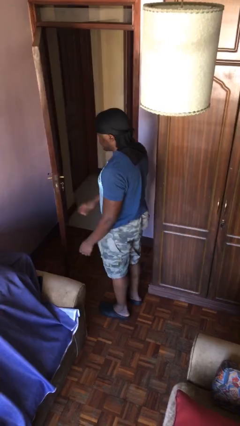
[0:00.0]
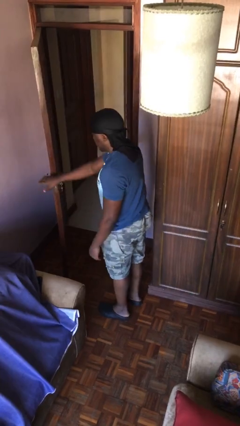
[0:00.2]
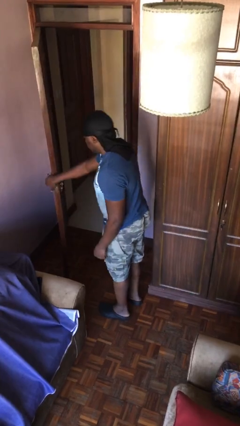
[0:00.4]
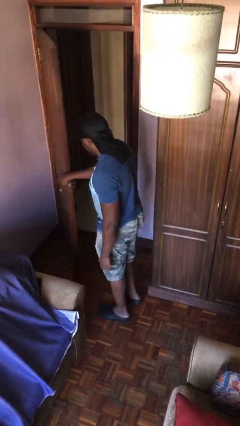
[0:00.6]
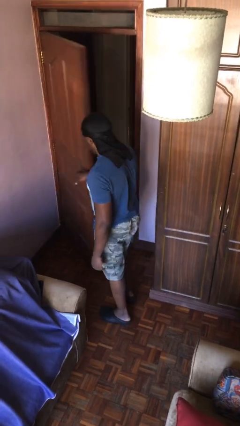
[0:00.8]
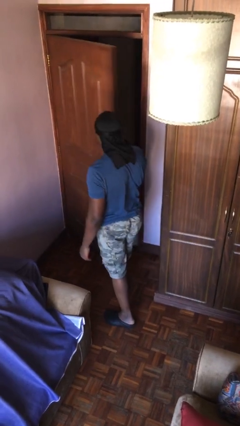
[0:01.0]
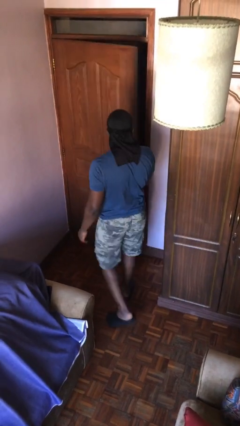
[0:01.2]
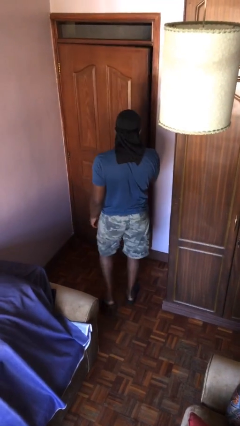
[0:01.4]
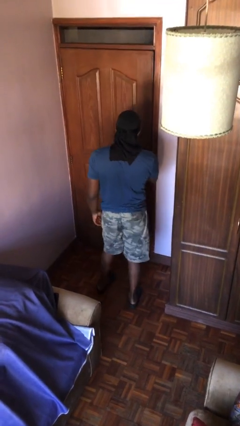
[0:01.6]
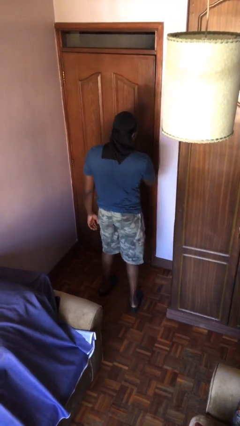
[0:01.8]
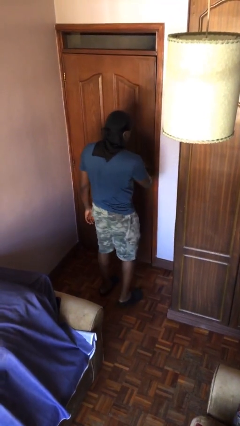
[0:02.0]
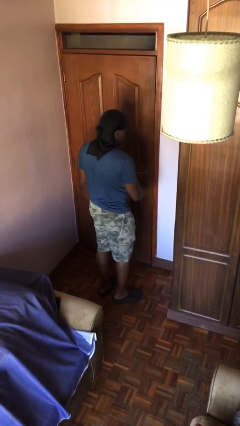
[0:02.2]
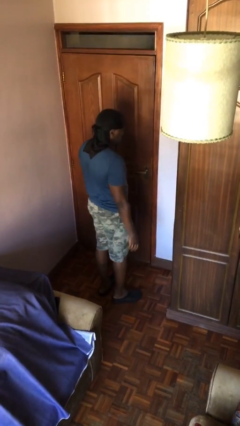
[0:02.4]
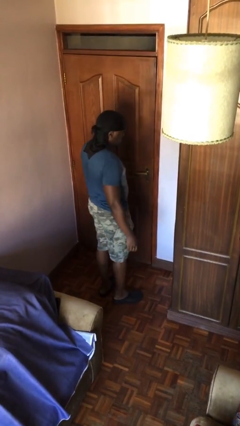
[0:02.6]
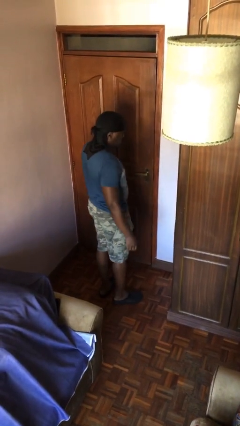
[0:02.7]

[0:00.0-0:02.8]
person closes facility door

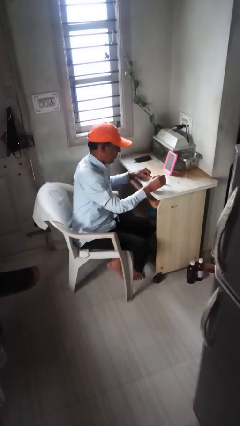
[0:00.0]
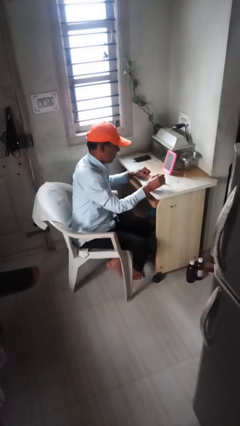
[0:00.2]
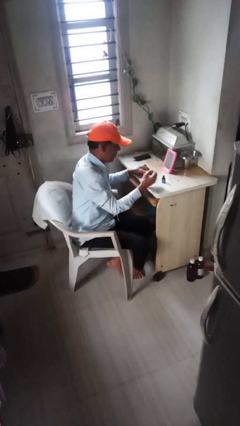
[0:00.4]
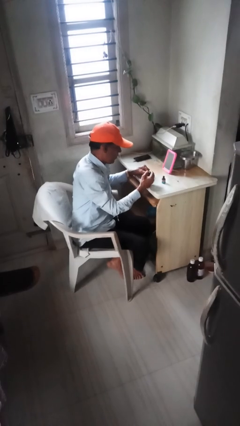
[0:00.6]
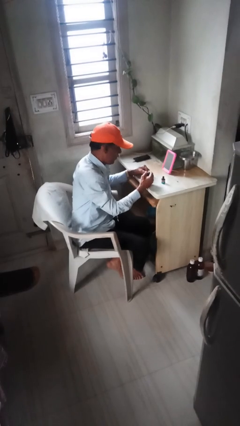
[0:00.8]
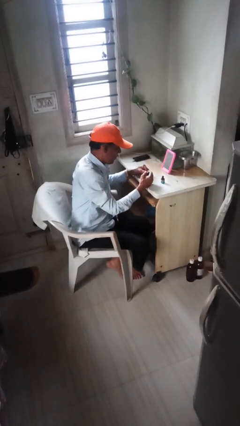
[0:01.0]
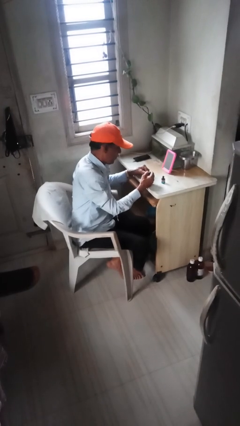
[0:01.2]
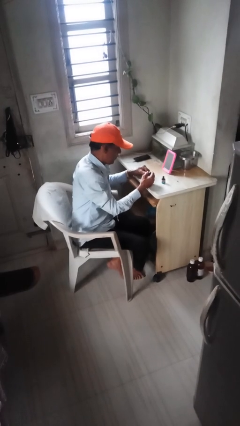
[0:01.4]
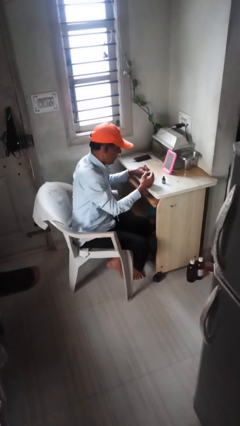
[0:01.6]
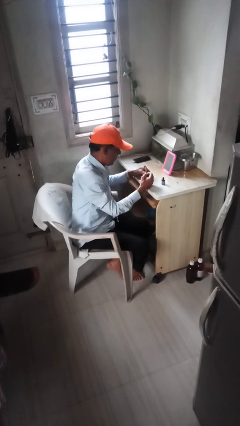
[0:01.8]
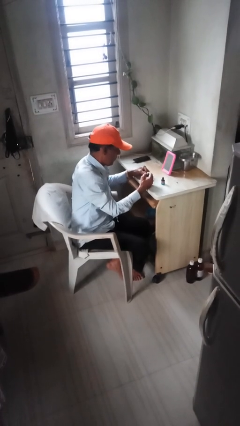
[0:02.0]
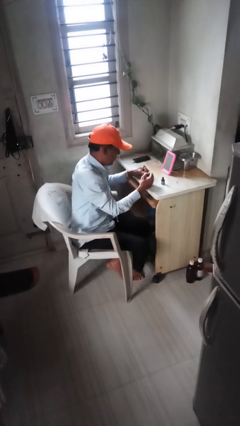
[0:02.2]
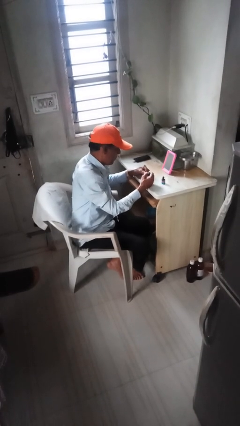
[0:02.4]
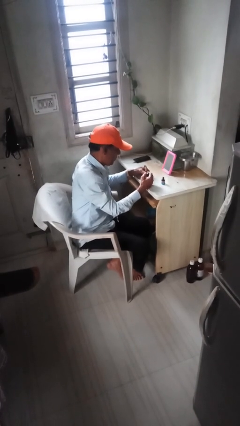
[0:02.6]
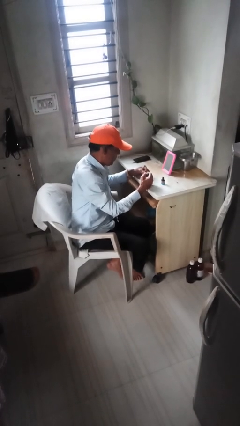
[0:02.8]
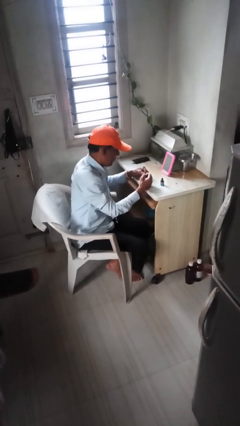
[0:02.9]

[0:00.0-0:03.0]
person paints fingernails

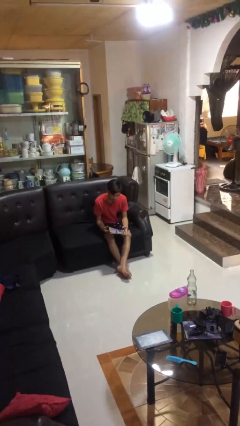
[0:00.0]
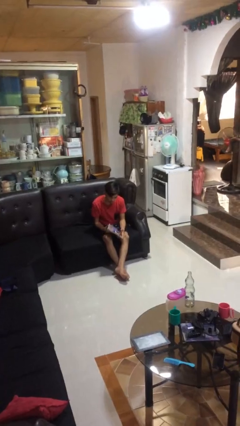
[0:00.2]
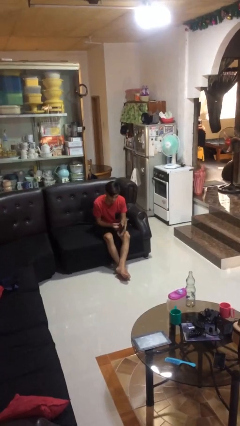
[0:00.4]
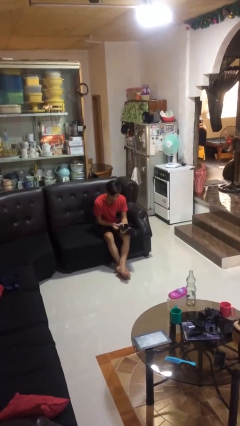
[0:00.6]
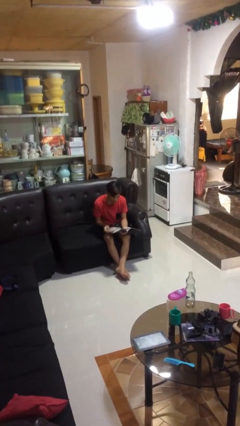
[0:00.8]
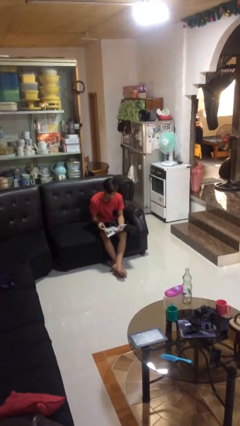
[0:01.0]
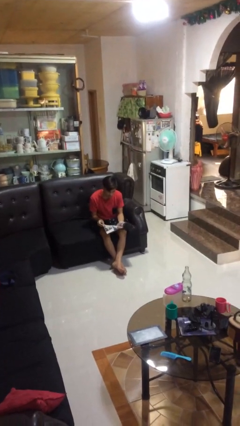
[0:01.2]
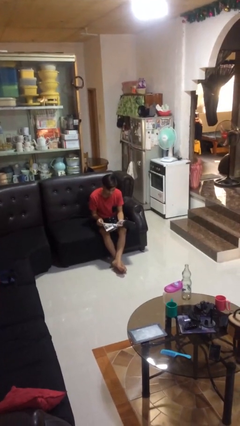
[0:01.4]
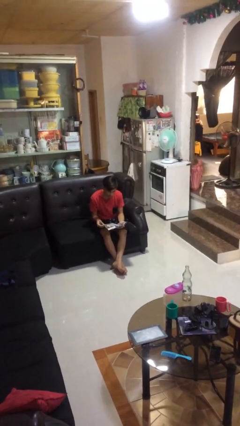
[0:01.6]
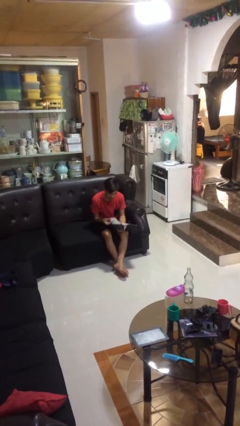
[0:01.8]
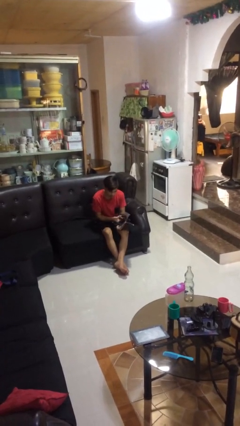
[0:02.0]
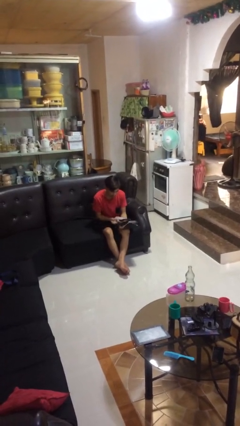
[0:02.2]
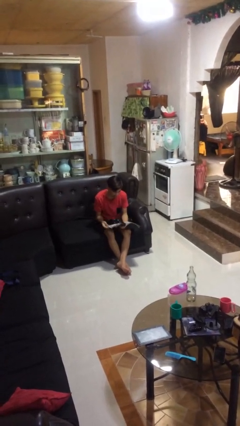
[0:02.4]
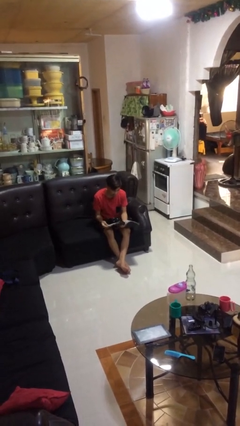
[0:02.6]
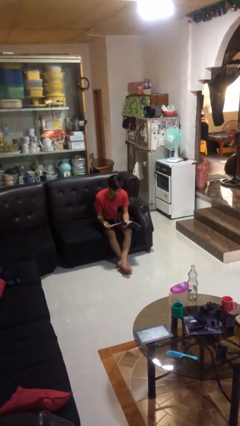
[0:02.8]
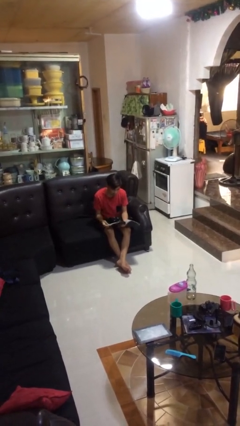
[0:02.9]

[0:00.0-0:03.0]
person reads magazine

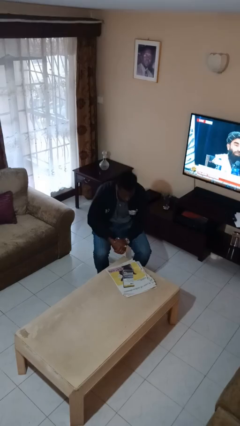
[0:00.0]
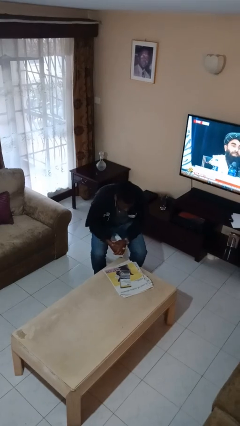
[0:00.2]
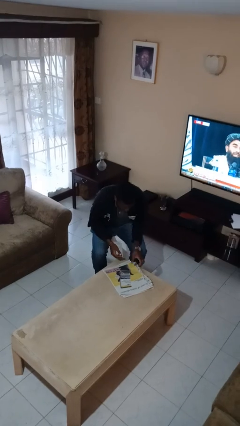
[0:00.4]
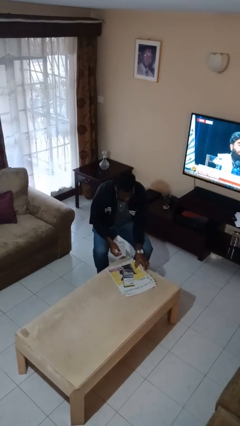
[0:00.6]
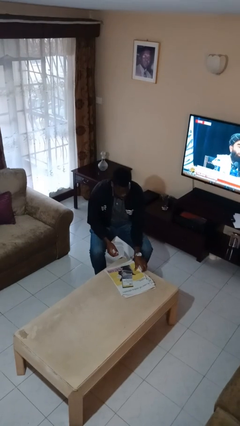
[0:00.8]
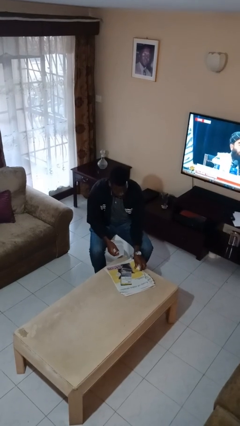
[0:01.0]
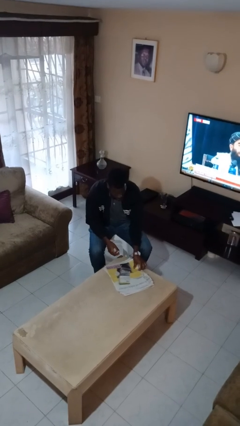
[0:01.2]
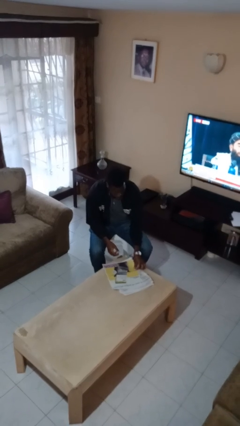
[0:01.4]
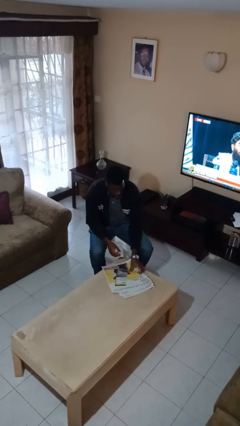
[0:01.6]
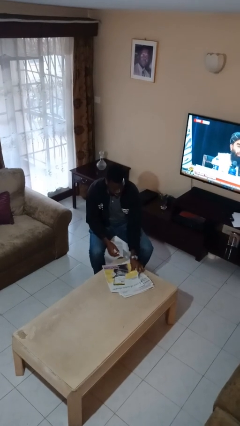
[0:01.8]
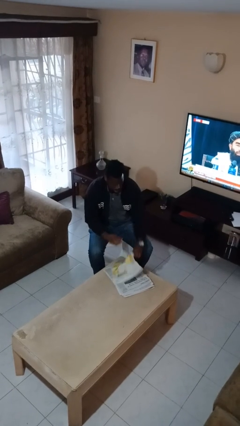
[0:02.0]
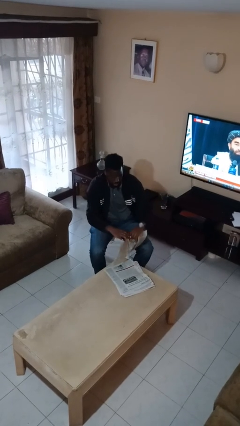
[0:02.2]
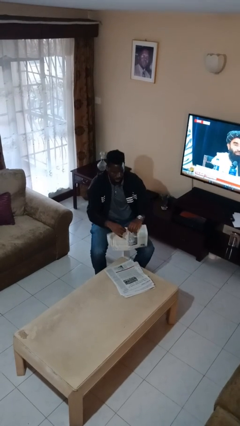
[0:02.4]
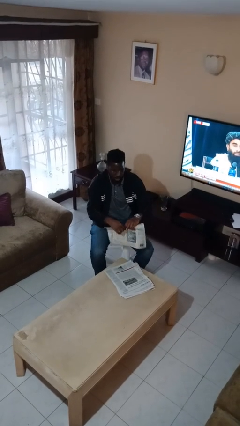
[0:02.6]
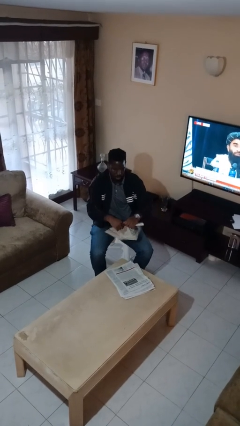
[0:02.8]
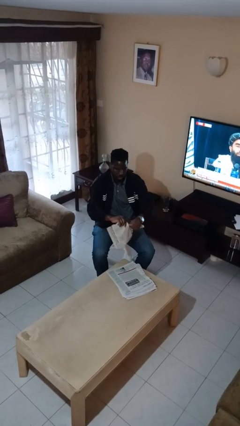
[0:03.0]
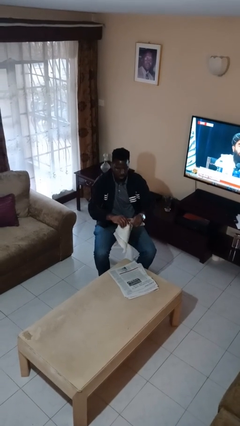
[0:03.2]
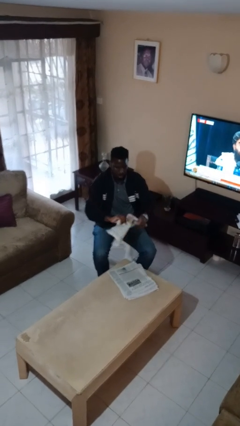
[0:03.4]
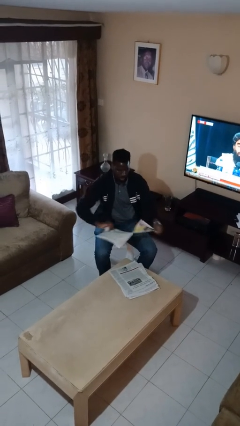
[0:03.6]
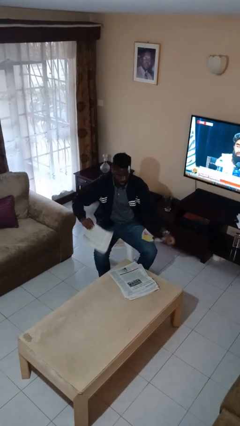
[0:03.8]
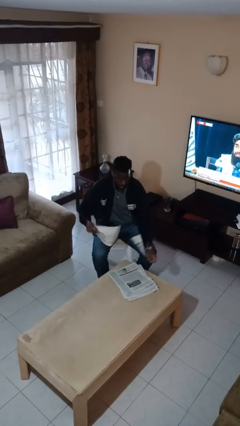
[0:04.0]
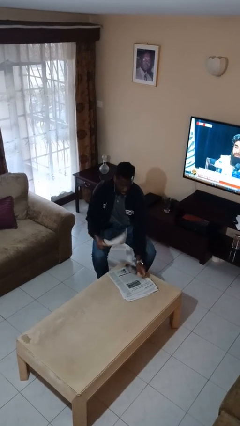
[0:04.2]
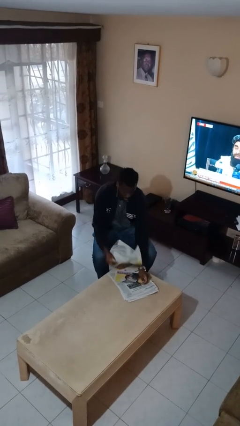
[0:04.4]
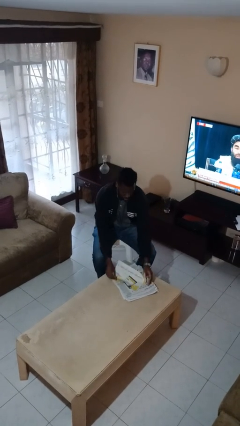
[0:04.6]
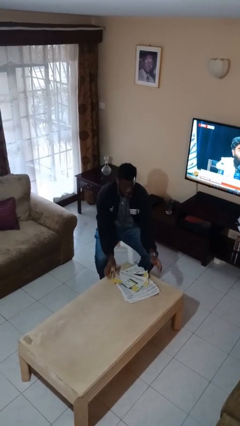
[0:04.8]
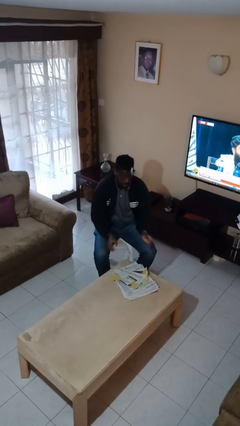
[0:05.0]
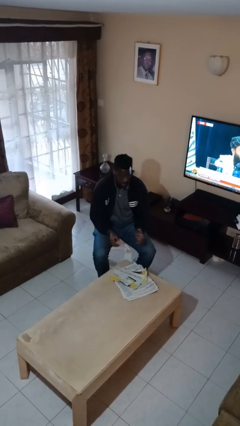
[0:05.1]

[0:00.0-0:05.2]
person tears paper

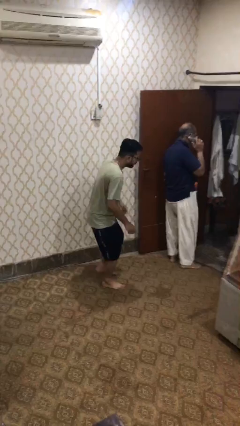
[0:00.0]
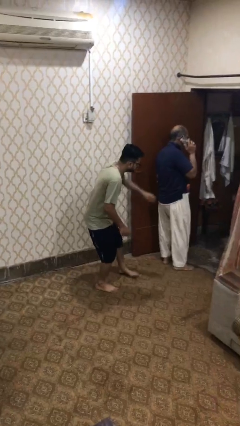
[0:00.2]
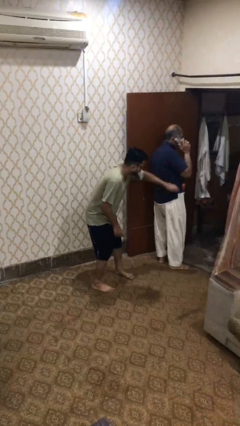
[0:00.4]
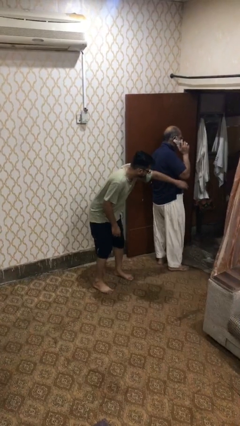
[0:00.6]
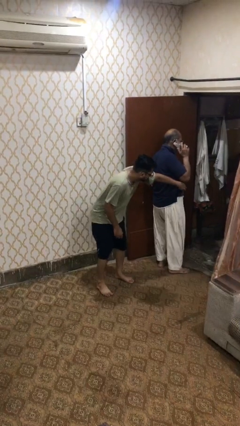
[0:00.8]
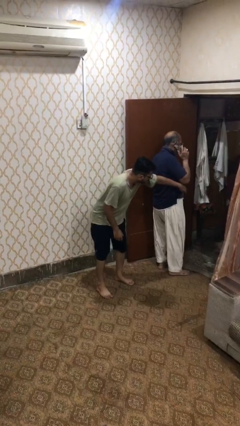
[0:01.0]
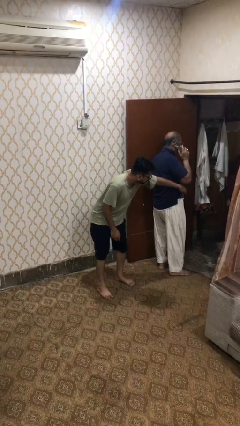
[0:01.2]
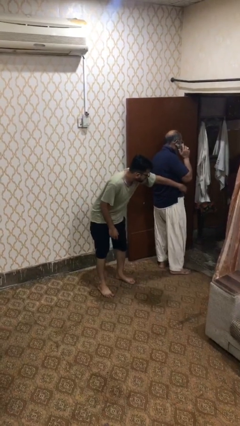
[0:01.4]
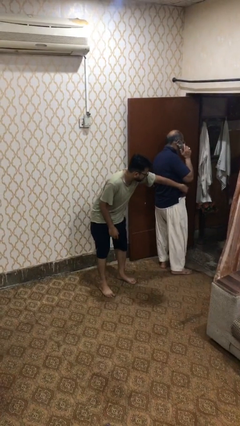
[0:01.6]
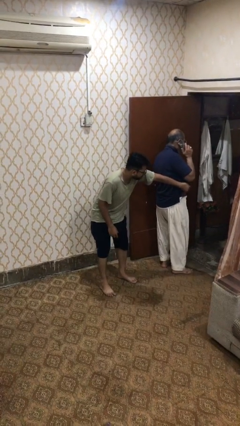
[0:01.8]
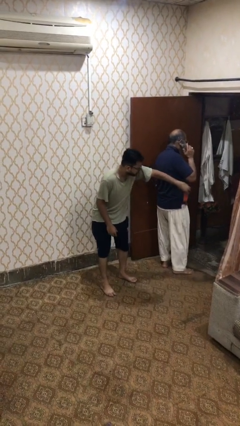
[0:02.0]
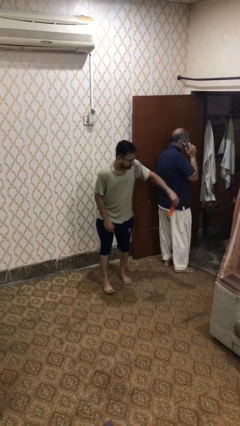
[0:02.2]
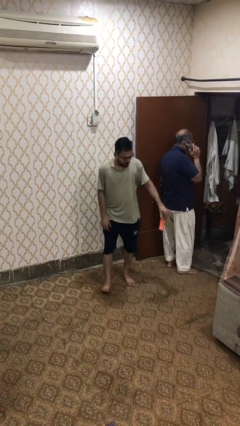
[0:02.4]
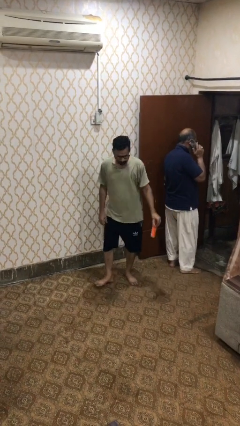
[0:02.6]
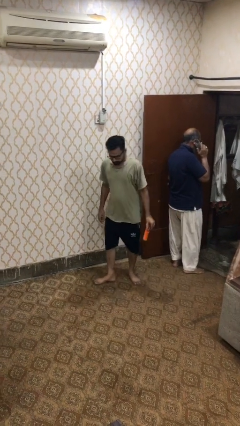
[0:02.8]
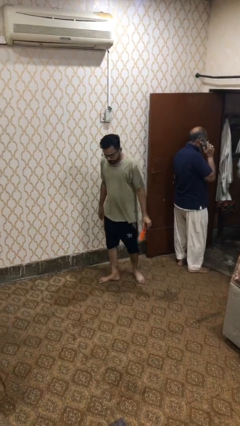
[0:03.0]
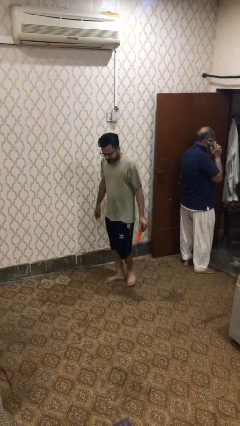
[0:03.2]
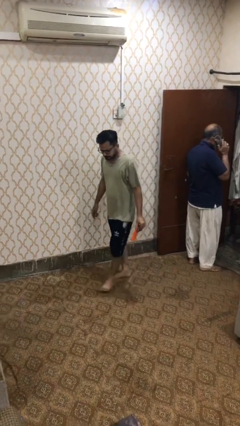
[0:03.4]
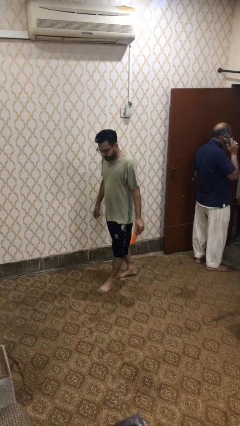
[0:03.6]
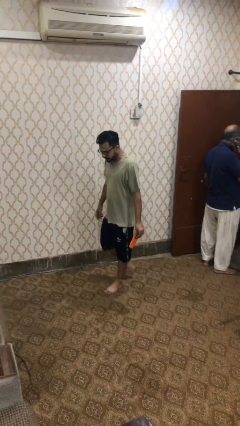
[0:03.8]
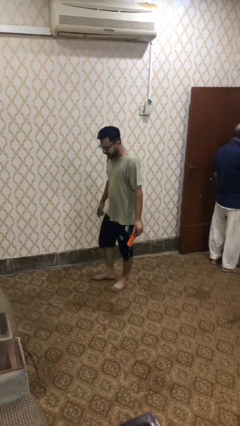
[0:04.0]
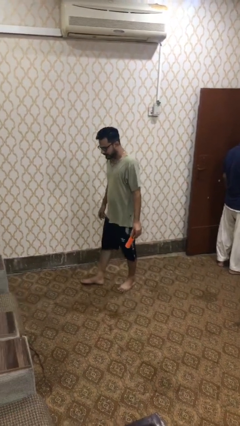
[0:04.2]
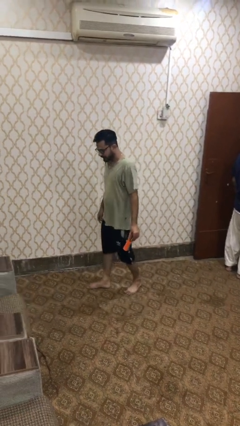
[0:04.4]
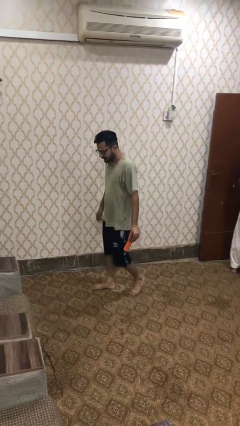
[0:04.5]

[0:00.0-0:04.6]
person steals object from person
